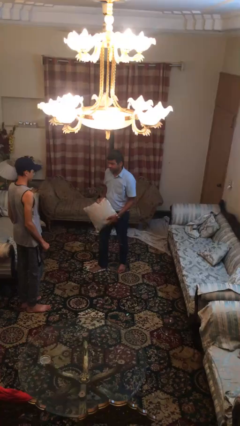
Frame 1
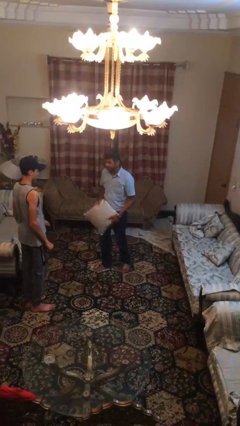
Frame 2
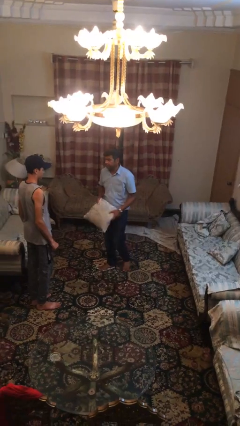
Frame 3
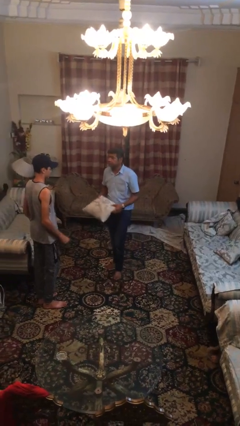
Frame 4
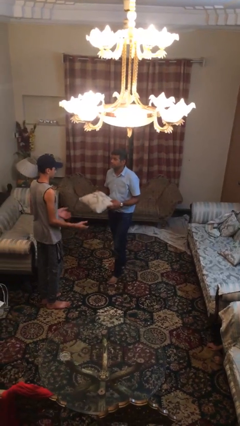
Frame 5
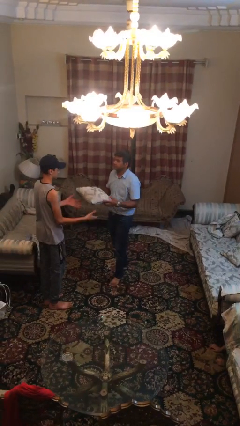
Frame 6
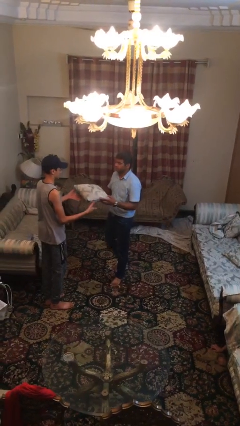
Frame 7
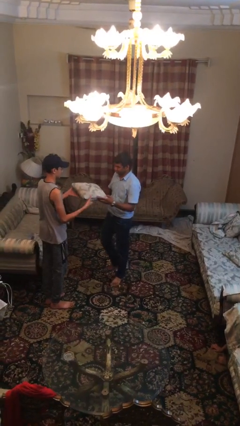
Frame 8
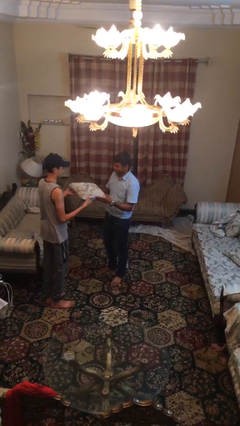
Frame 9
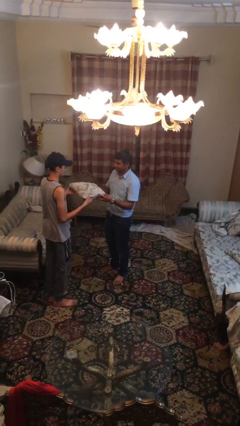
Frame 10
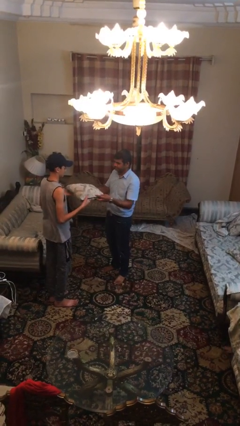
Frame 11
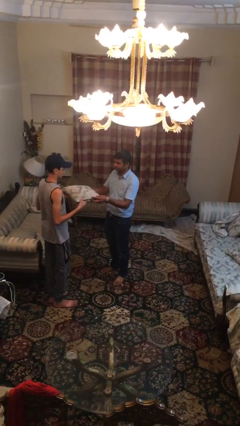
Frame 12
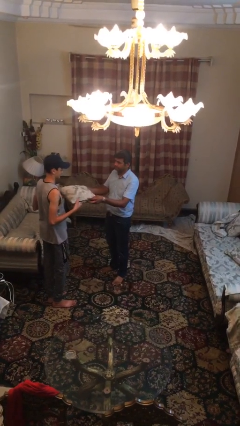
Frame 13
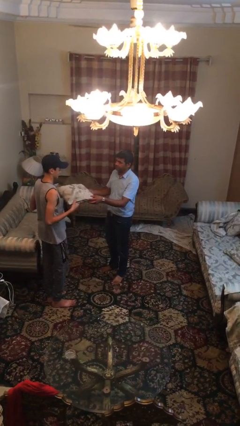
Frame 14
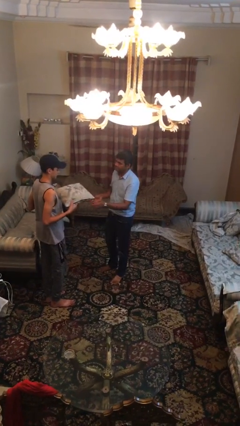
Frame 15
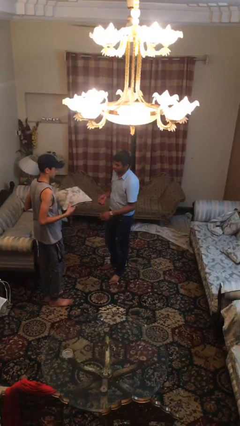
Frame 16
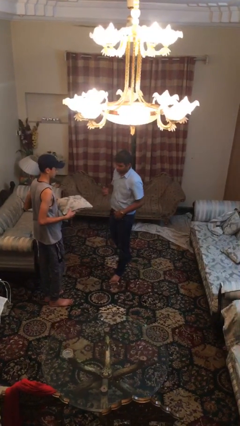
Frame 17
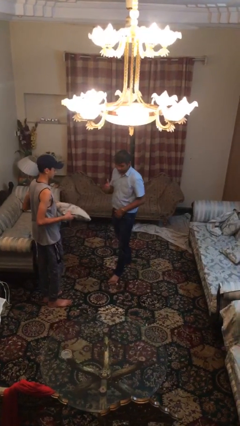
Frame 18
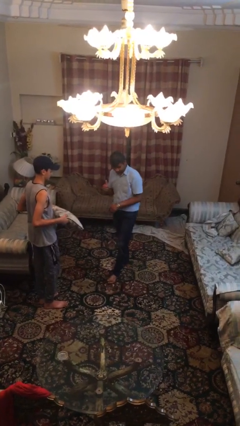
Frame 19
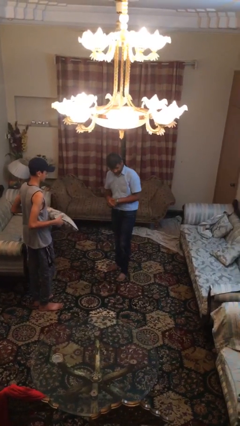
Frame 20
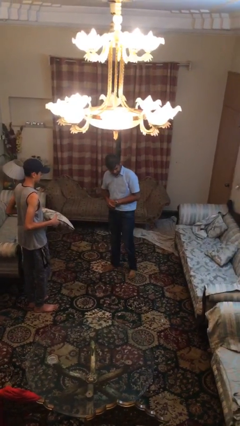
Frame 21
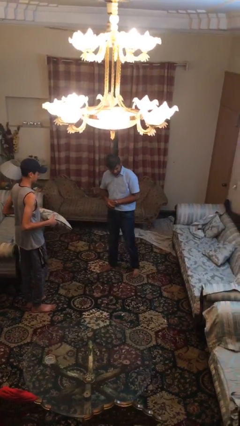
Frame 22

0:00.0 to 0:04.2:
person transfers object to person

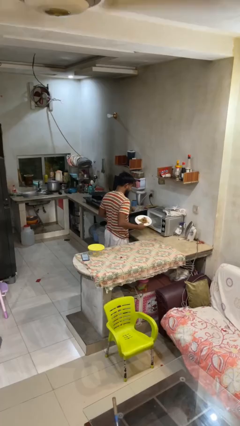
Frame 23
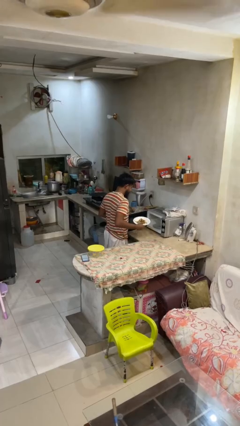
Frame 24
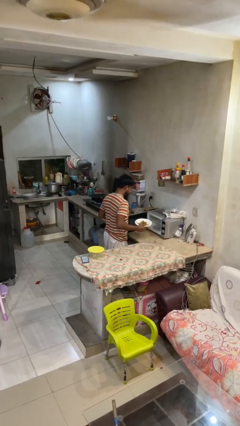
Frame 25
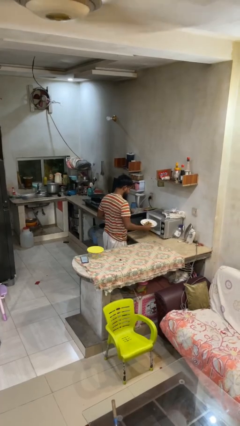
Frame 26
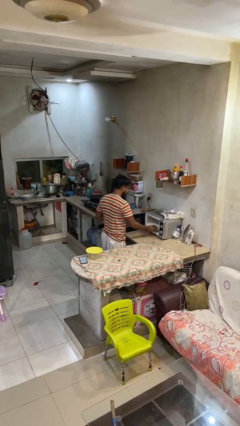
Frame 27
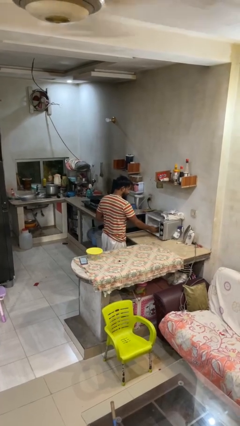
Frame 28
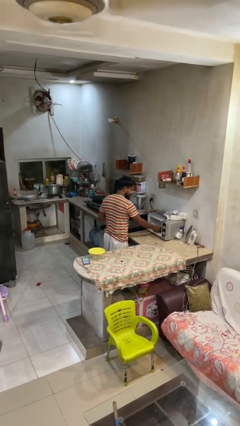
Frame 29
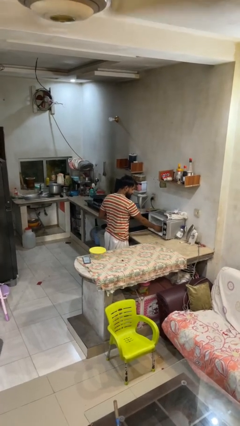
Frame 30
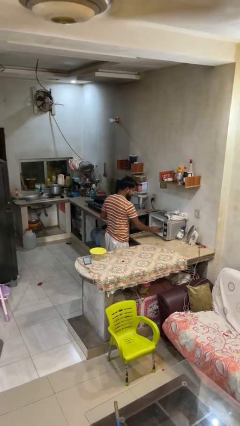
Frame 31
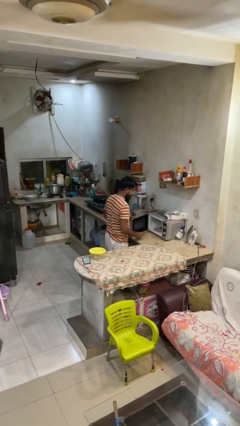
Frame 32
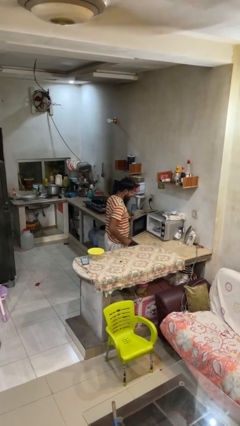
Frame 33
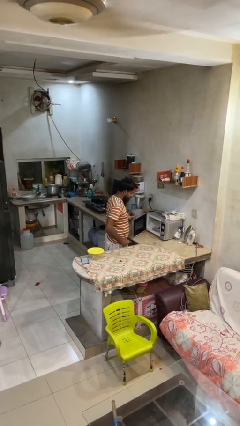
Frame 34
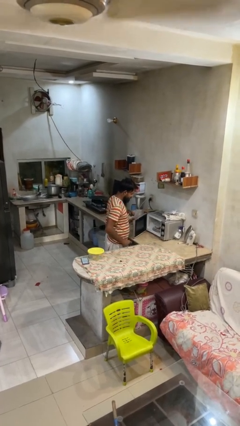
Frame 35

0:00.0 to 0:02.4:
person puts object into microwave

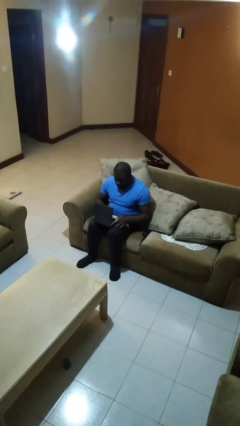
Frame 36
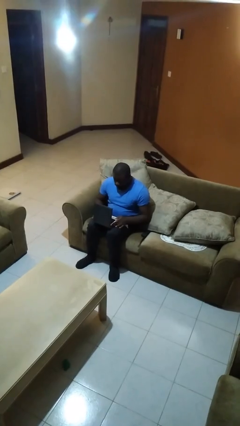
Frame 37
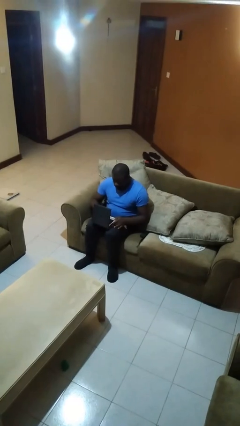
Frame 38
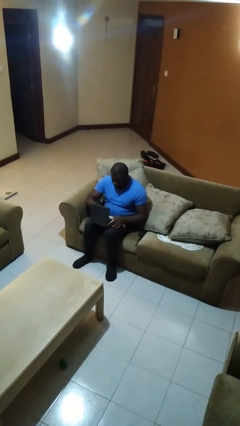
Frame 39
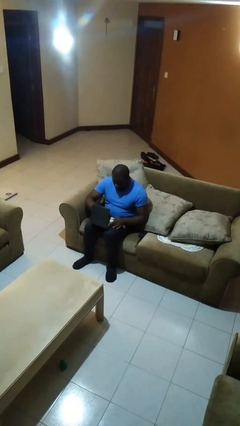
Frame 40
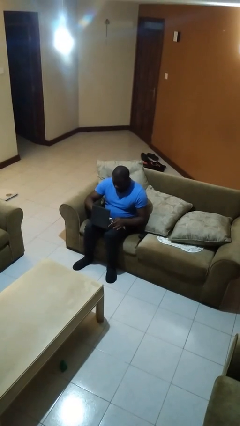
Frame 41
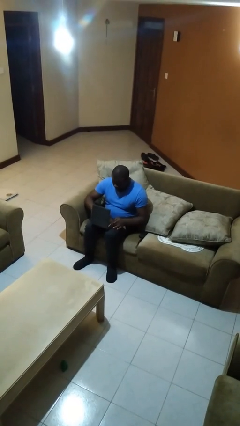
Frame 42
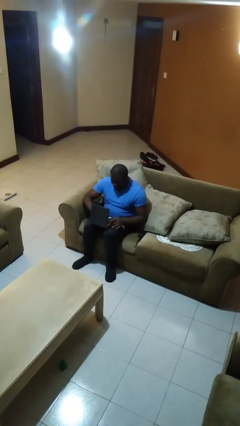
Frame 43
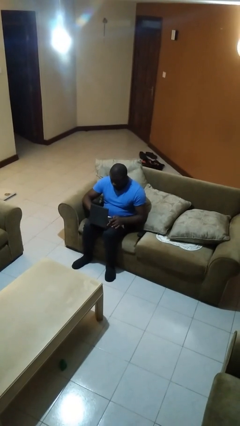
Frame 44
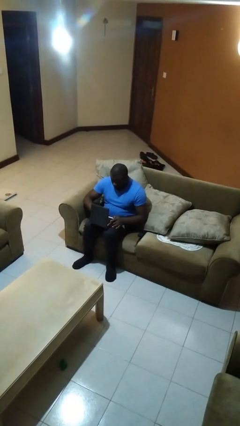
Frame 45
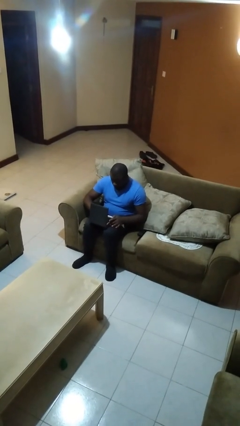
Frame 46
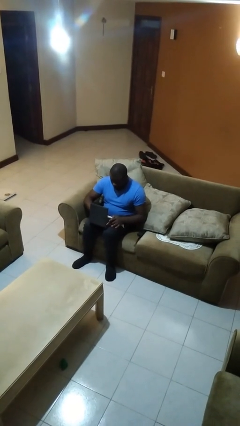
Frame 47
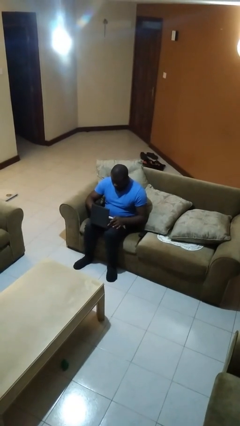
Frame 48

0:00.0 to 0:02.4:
person searches jewelry box

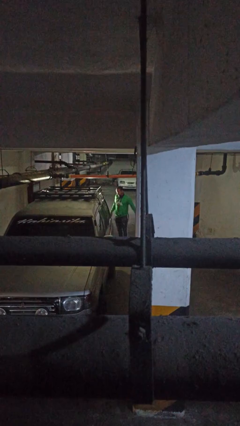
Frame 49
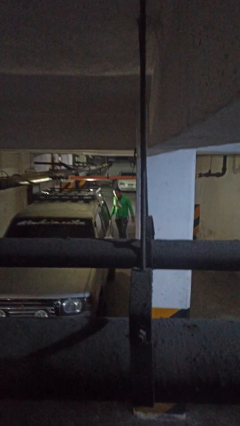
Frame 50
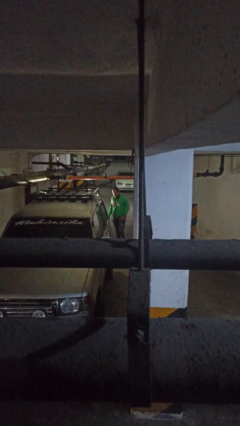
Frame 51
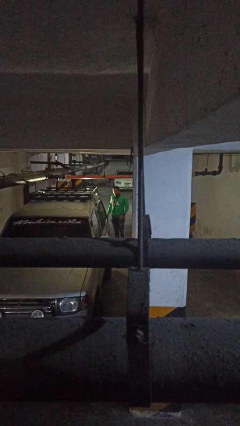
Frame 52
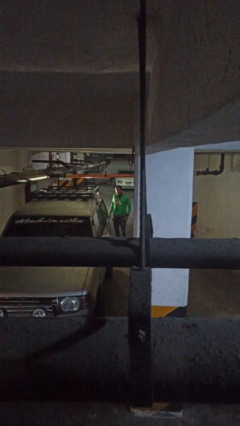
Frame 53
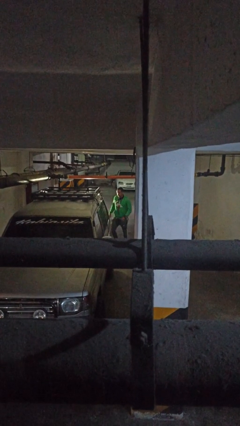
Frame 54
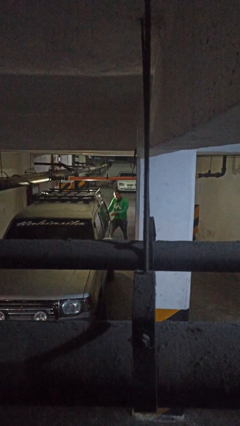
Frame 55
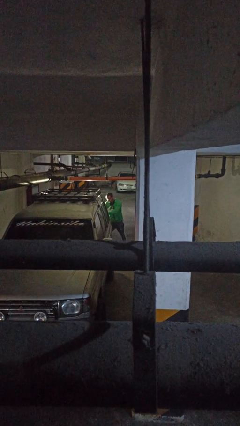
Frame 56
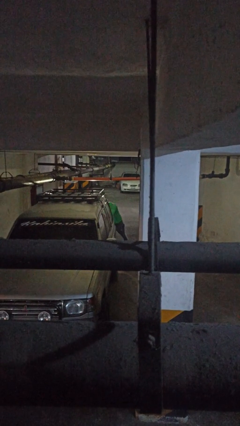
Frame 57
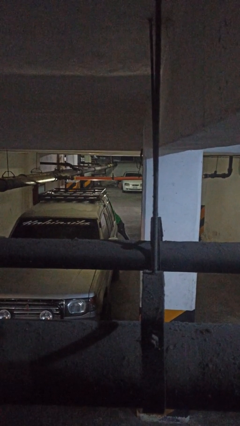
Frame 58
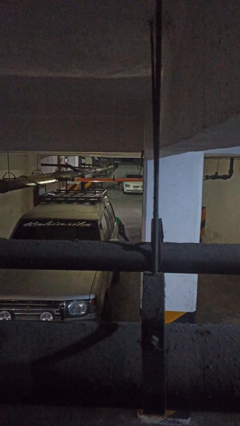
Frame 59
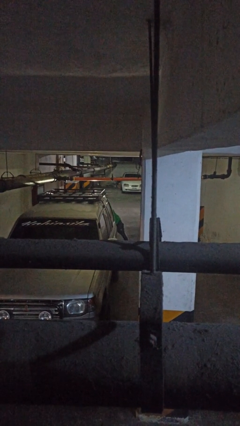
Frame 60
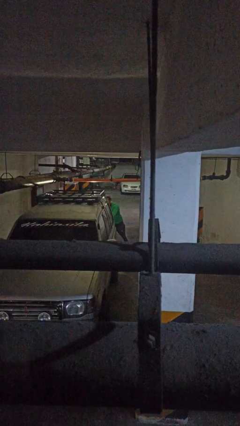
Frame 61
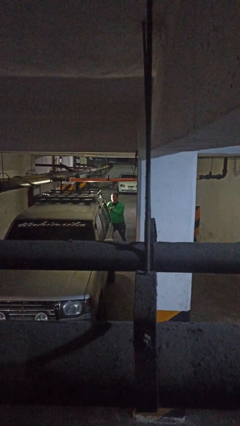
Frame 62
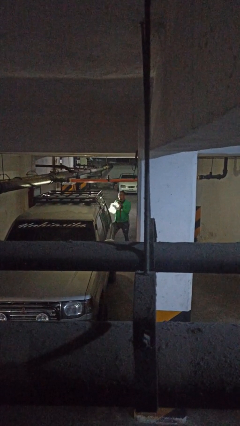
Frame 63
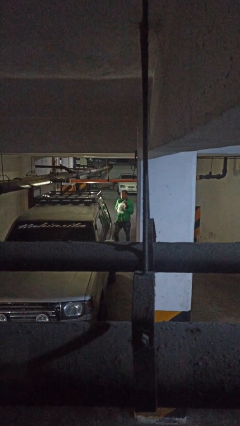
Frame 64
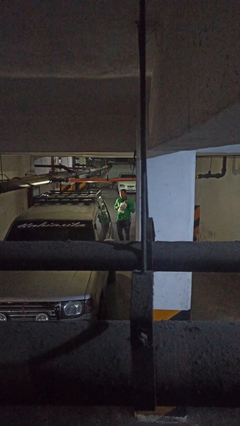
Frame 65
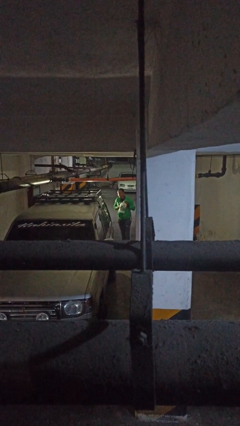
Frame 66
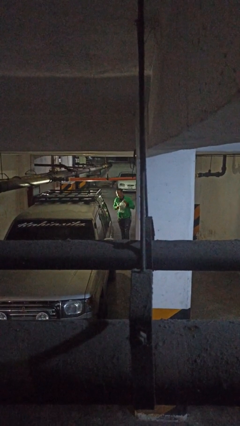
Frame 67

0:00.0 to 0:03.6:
person unloads car

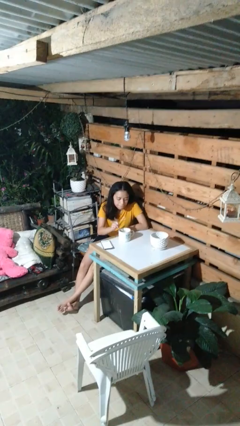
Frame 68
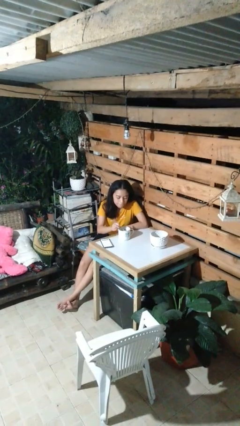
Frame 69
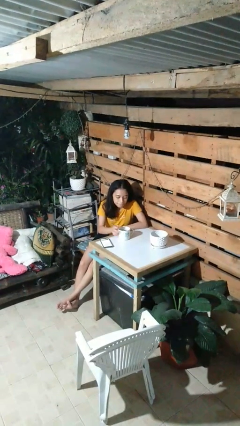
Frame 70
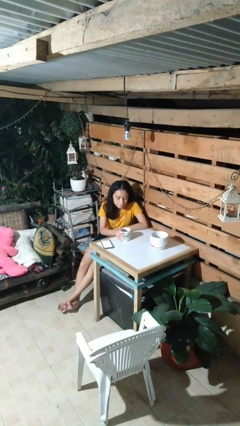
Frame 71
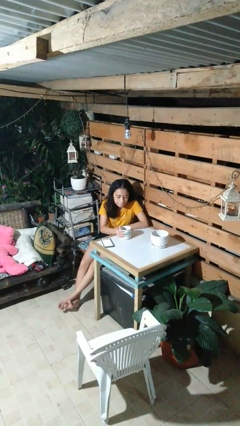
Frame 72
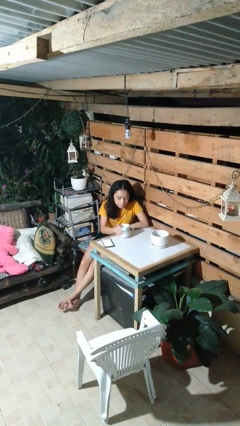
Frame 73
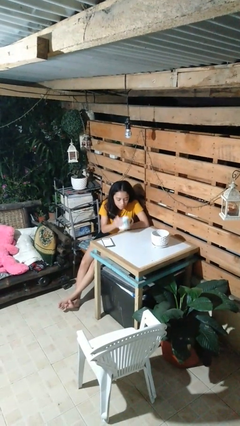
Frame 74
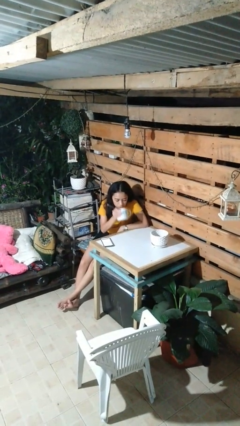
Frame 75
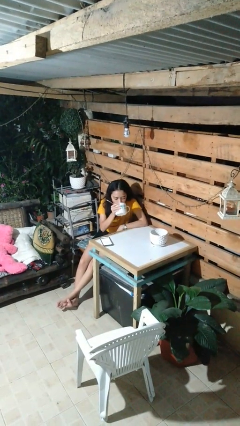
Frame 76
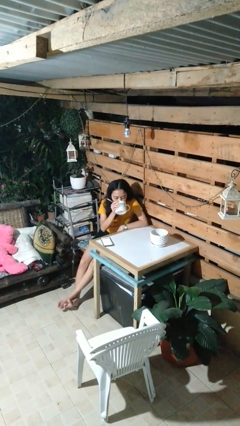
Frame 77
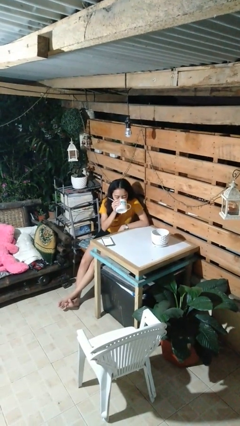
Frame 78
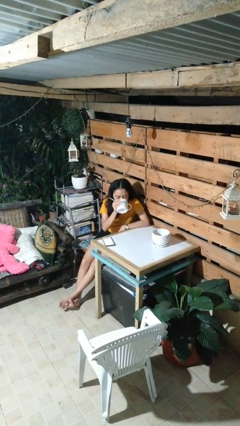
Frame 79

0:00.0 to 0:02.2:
person drinks from mug

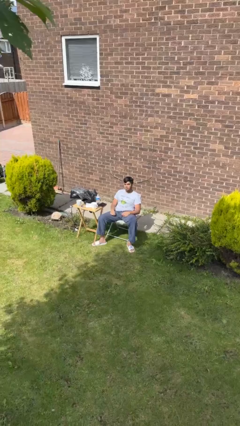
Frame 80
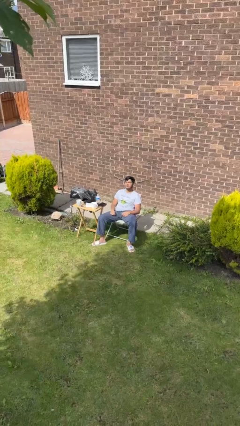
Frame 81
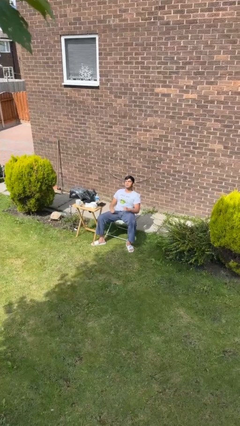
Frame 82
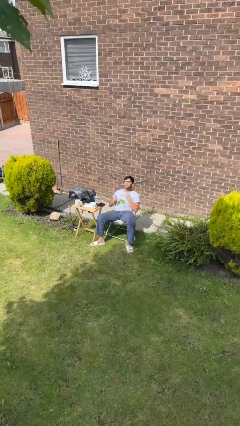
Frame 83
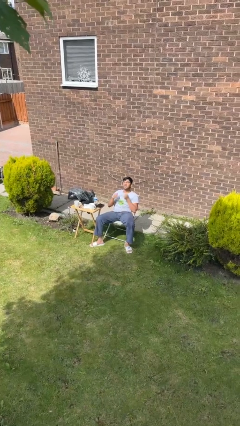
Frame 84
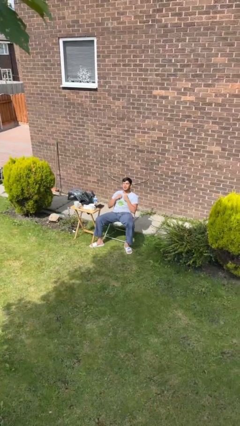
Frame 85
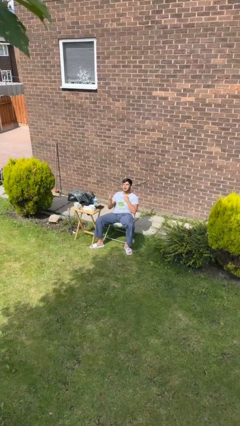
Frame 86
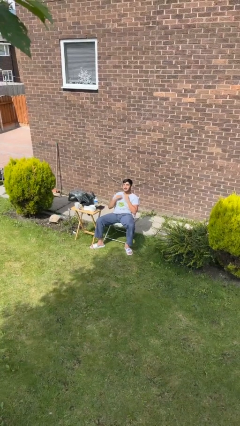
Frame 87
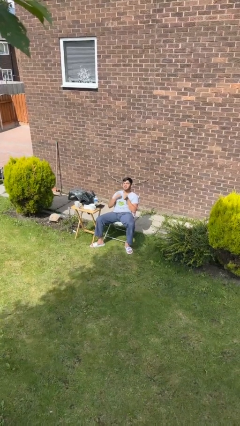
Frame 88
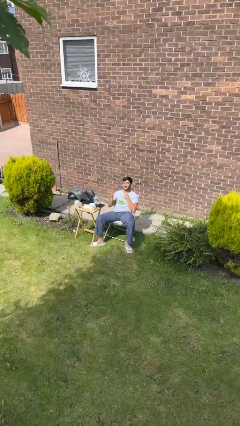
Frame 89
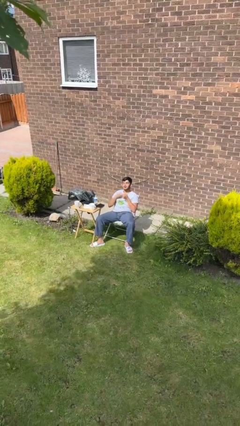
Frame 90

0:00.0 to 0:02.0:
person drums on chest

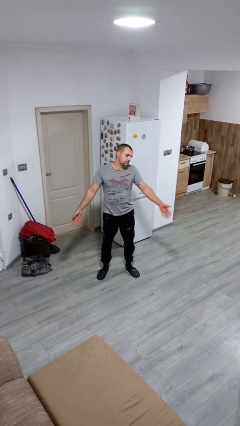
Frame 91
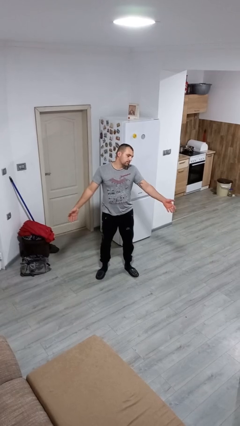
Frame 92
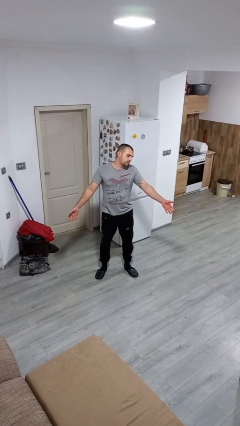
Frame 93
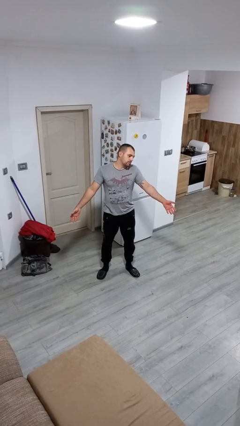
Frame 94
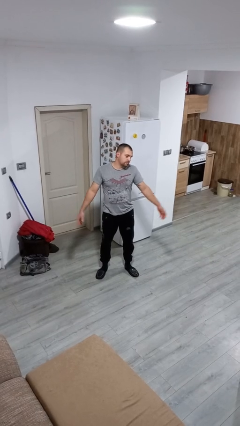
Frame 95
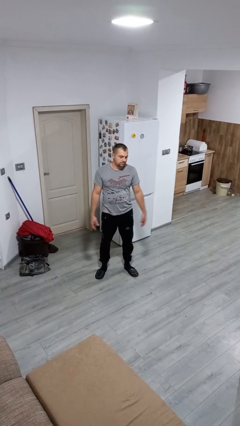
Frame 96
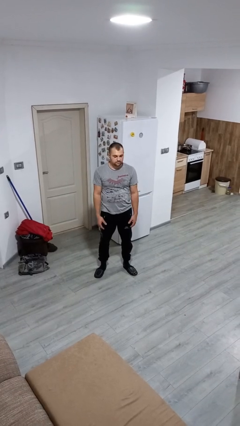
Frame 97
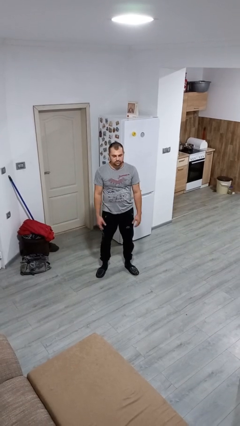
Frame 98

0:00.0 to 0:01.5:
person shrugs
